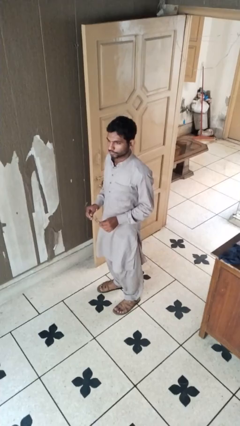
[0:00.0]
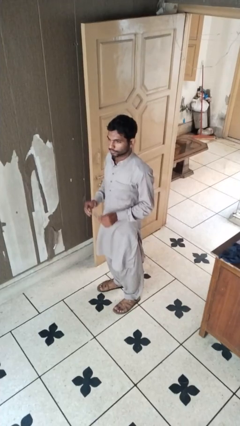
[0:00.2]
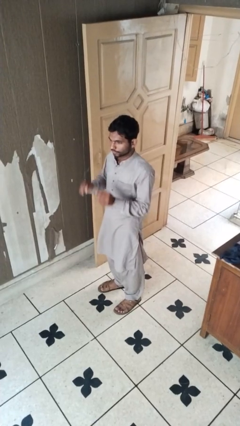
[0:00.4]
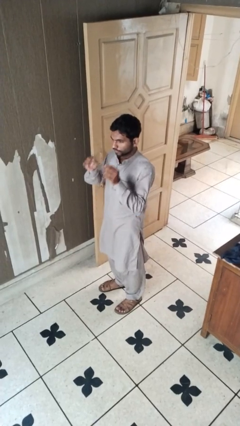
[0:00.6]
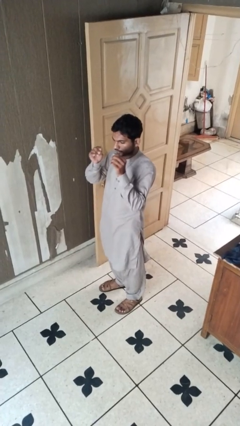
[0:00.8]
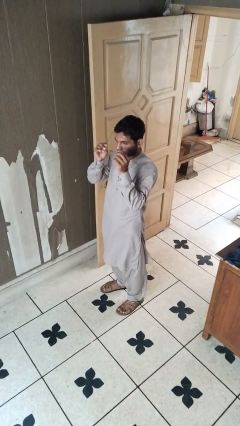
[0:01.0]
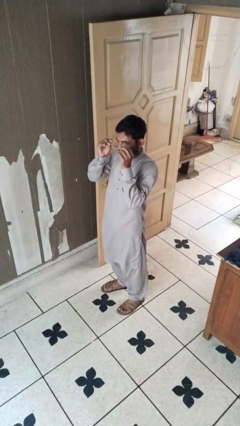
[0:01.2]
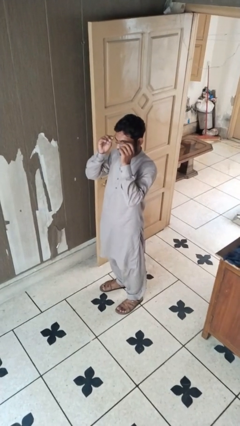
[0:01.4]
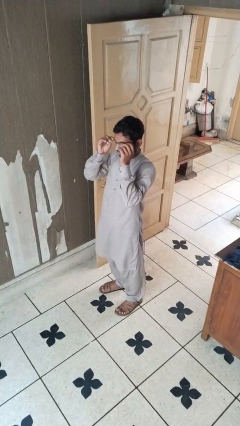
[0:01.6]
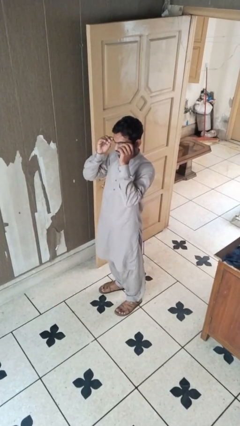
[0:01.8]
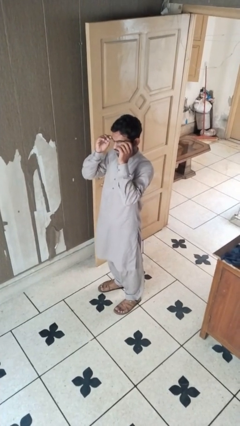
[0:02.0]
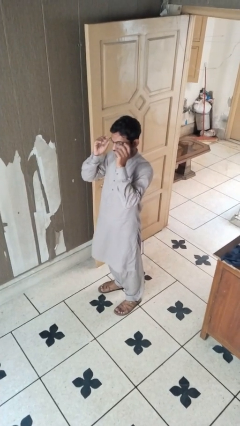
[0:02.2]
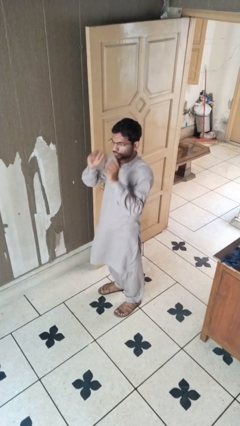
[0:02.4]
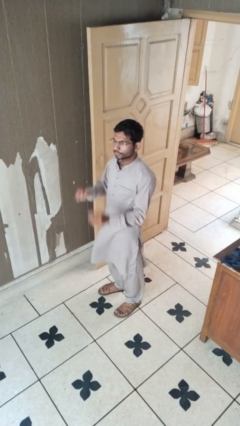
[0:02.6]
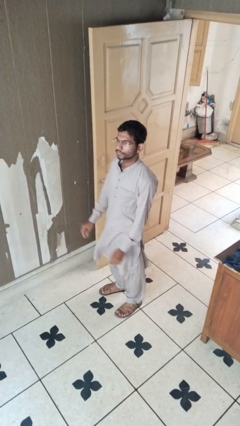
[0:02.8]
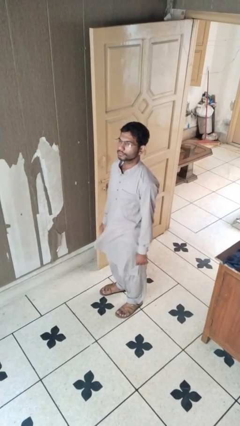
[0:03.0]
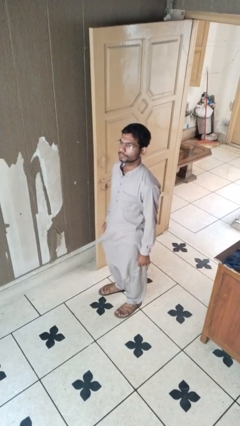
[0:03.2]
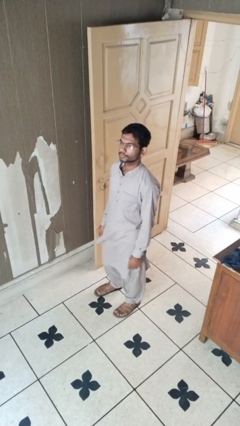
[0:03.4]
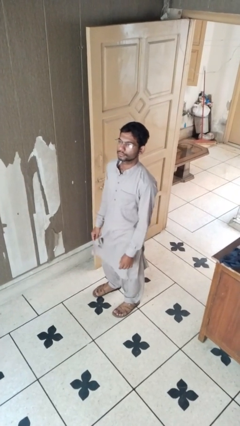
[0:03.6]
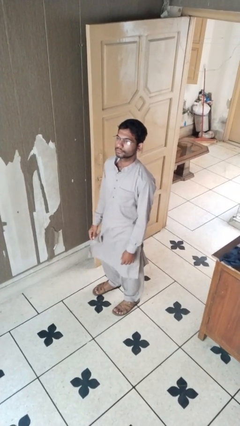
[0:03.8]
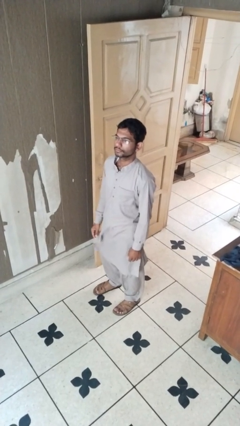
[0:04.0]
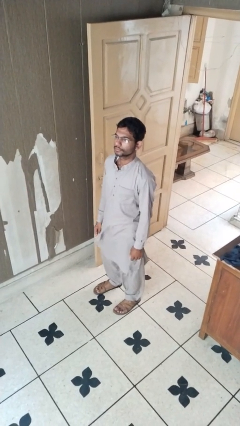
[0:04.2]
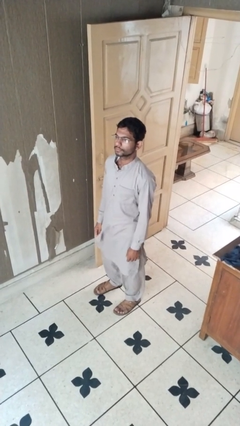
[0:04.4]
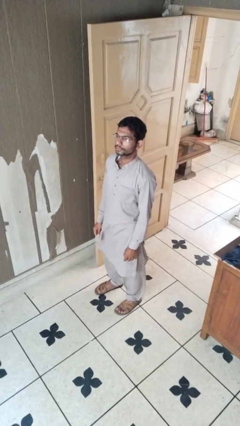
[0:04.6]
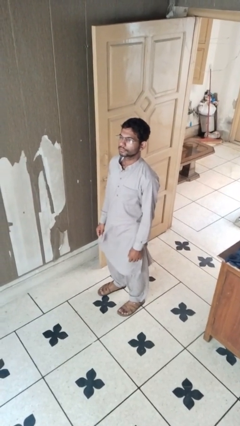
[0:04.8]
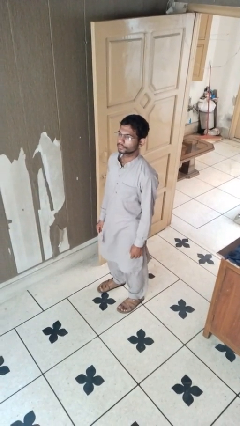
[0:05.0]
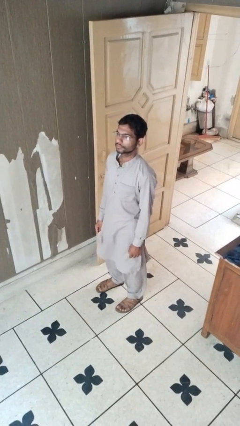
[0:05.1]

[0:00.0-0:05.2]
person puts on glasses

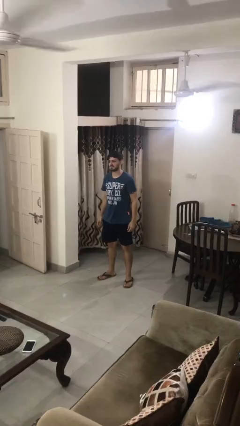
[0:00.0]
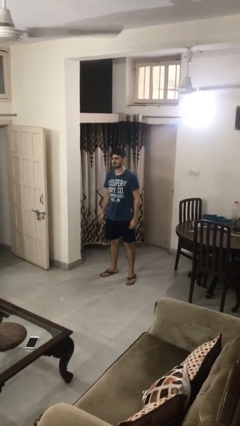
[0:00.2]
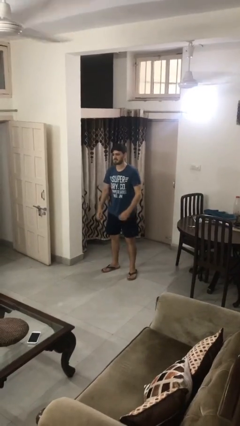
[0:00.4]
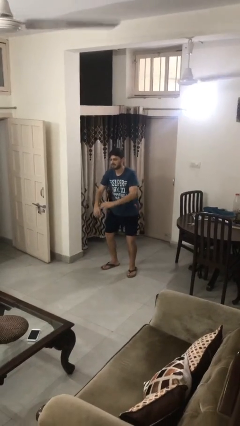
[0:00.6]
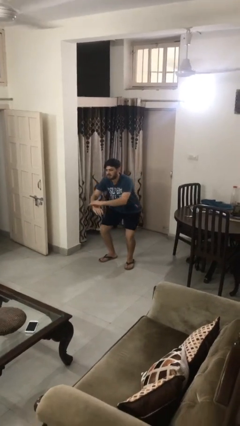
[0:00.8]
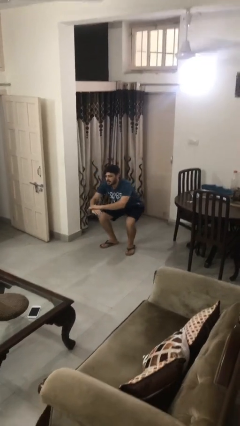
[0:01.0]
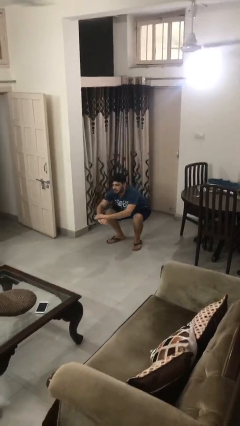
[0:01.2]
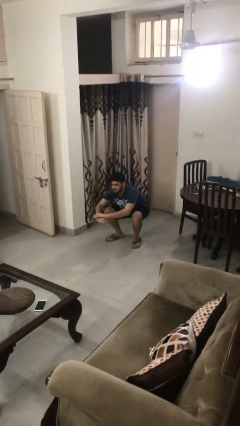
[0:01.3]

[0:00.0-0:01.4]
person squats

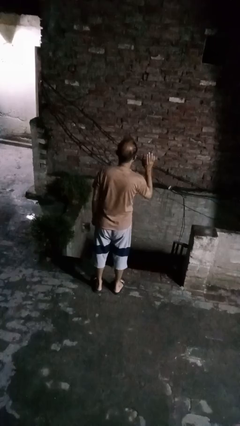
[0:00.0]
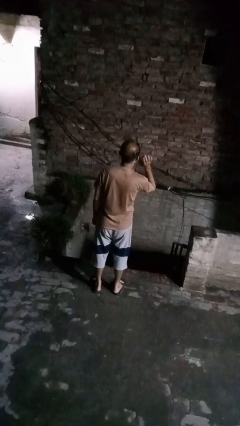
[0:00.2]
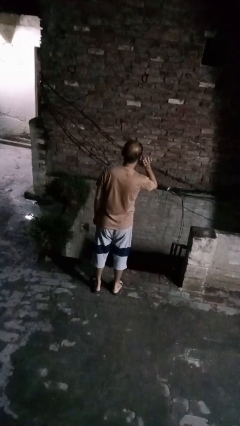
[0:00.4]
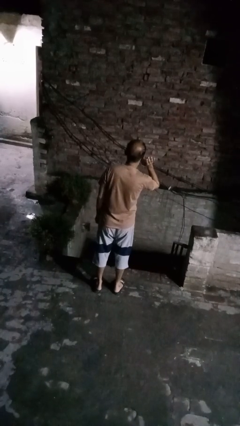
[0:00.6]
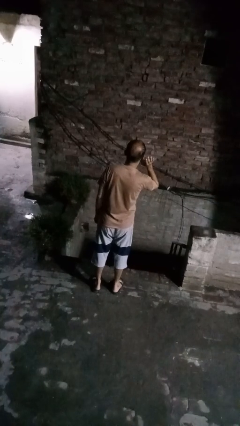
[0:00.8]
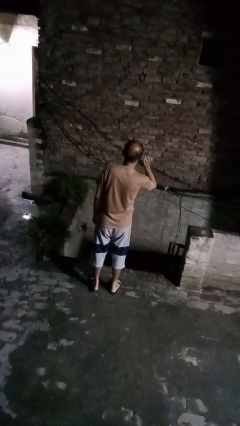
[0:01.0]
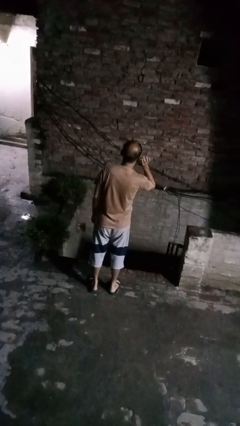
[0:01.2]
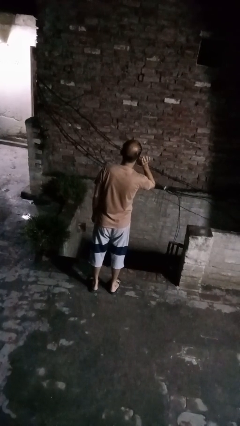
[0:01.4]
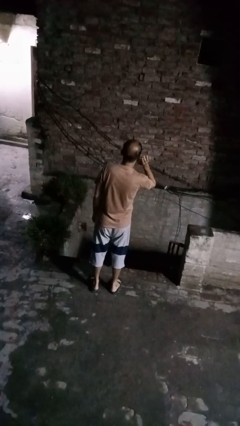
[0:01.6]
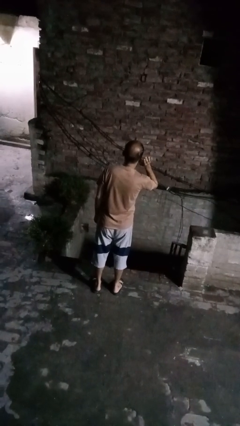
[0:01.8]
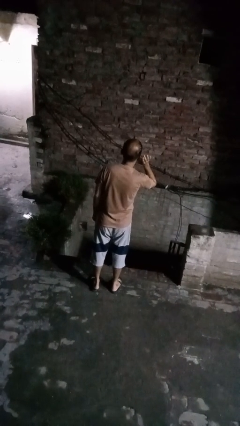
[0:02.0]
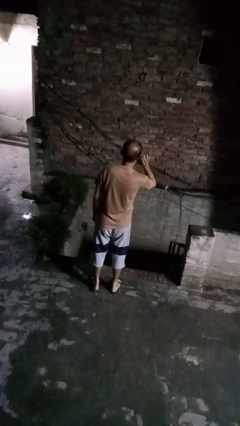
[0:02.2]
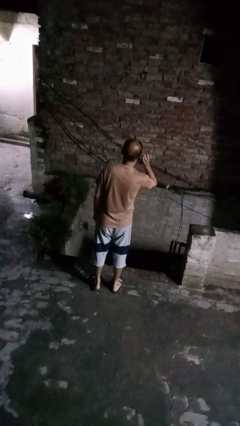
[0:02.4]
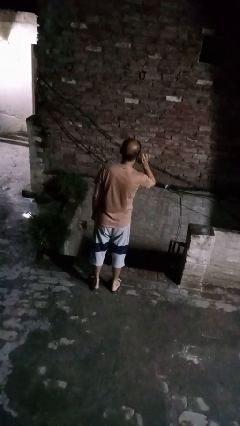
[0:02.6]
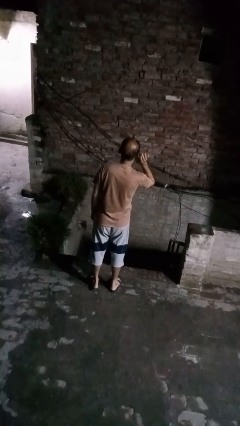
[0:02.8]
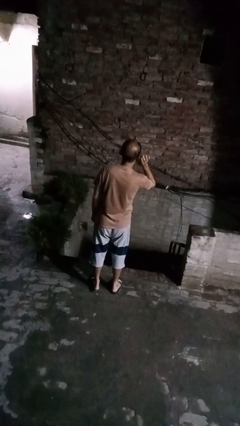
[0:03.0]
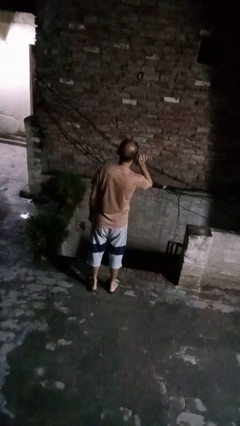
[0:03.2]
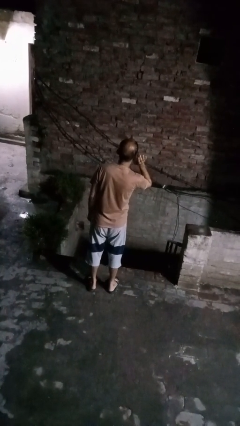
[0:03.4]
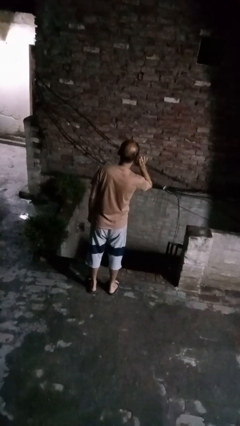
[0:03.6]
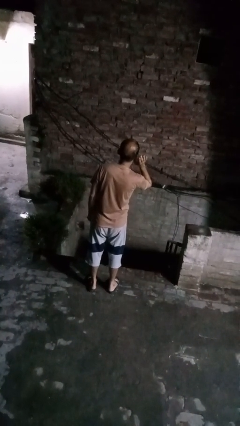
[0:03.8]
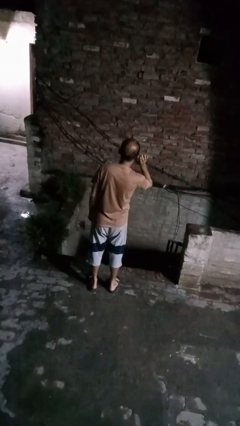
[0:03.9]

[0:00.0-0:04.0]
person gestures listen closely

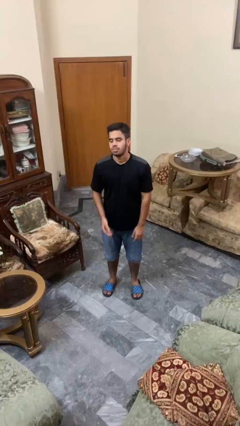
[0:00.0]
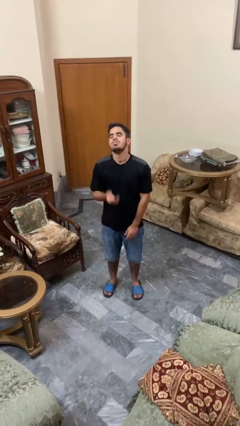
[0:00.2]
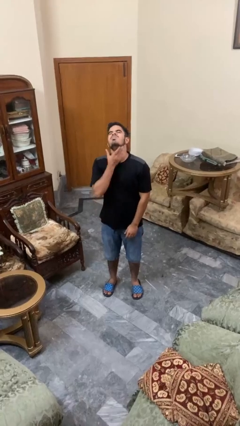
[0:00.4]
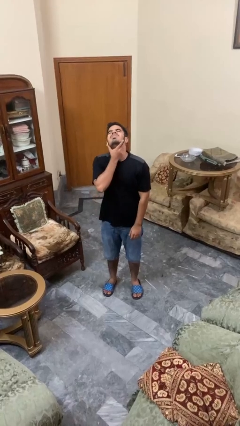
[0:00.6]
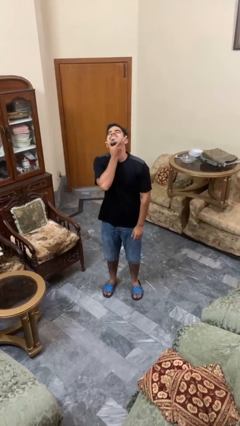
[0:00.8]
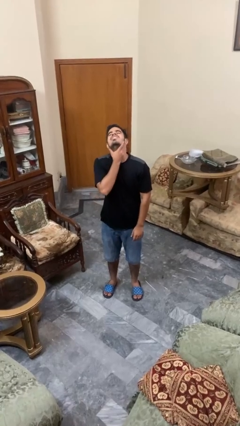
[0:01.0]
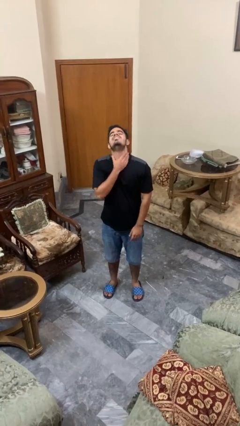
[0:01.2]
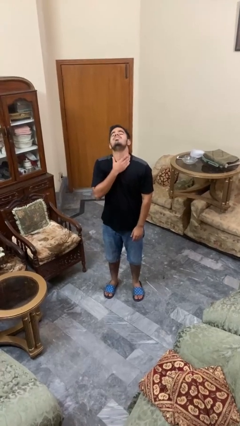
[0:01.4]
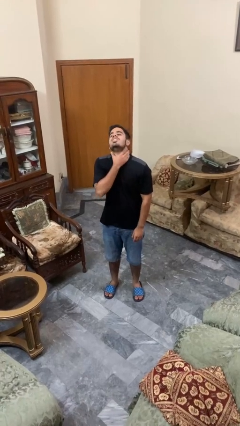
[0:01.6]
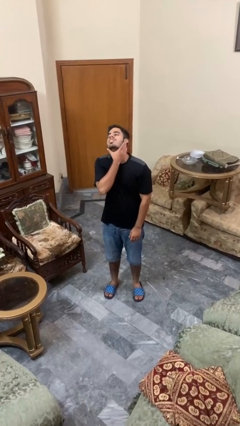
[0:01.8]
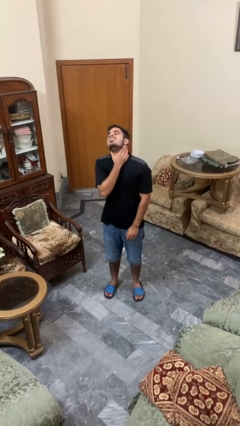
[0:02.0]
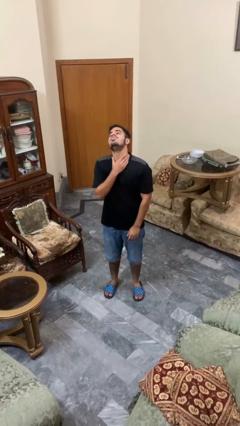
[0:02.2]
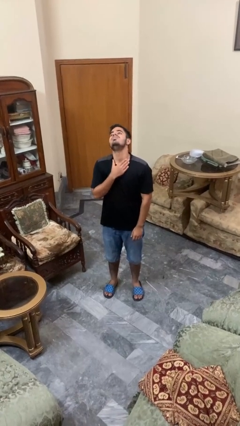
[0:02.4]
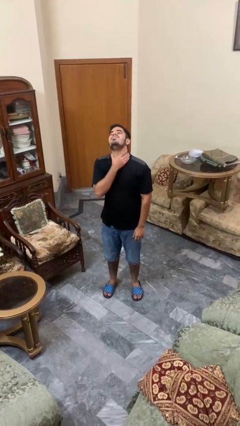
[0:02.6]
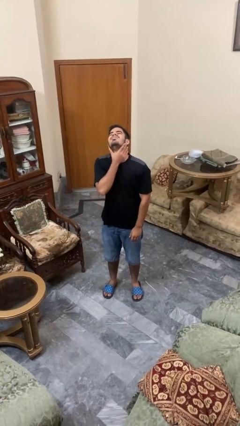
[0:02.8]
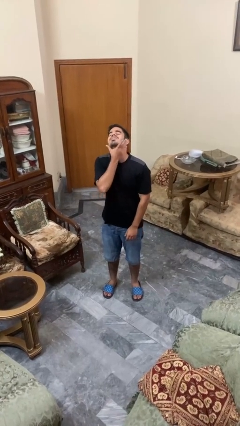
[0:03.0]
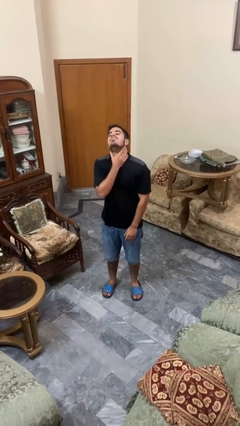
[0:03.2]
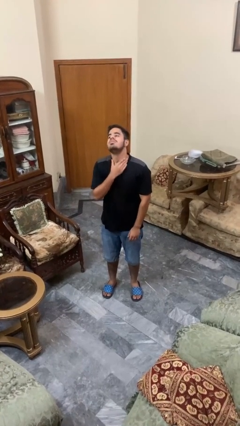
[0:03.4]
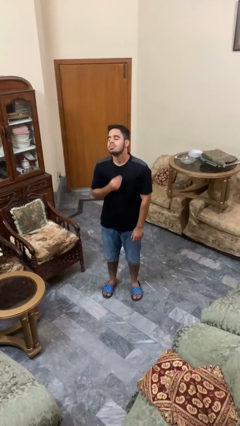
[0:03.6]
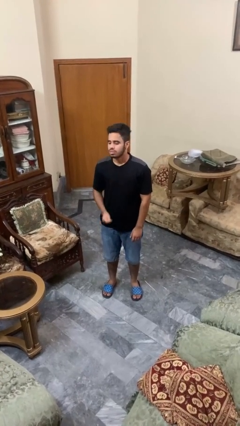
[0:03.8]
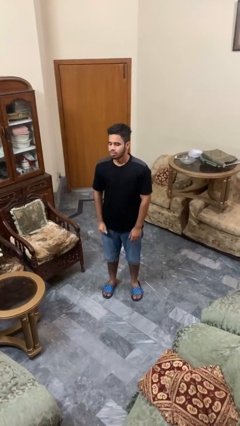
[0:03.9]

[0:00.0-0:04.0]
person rubs neck

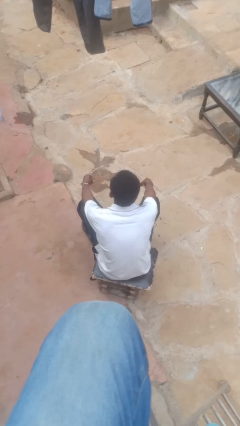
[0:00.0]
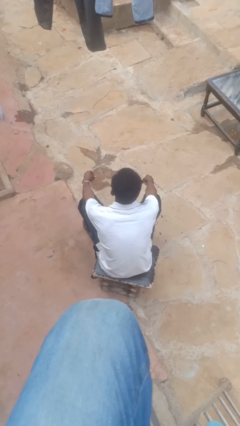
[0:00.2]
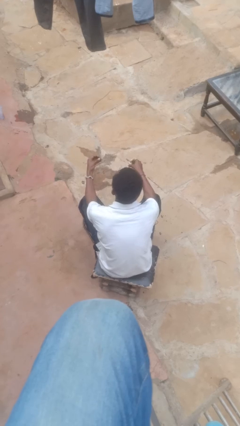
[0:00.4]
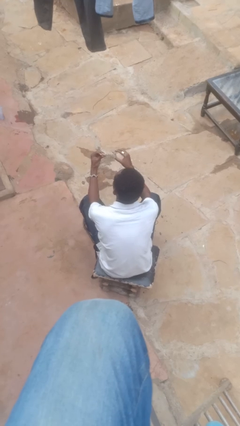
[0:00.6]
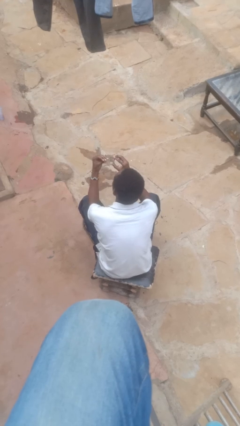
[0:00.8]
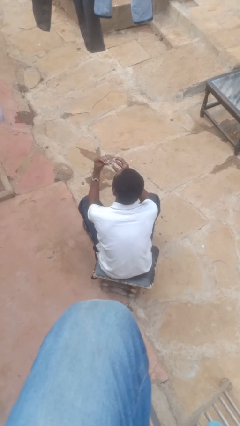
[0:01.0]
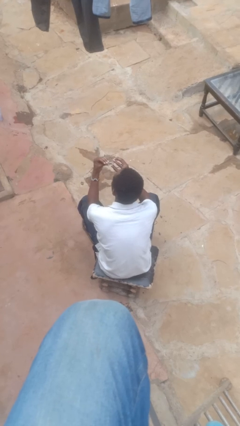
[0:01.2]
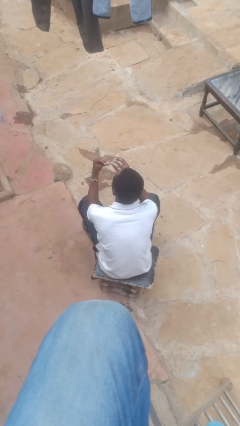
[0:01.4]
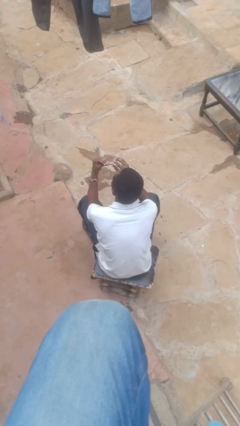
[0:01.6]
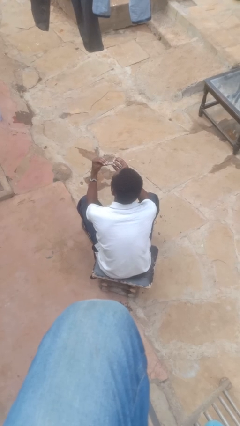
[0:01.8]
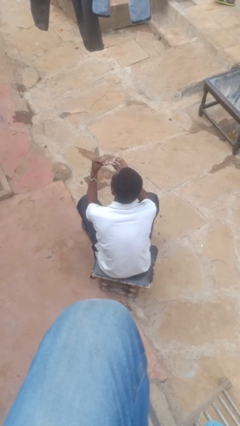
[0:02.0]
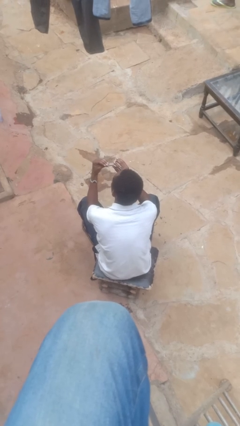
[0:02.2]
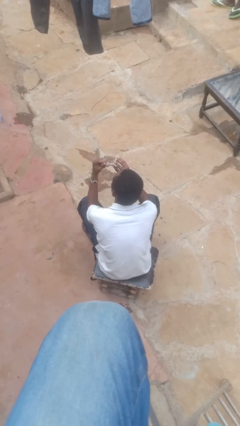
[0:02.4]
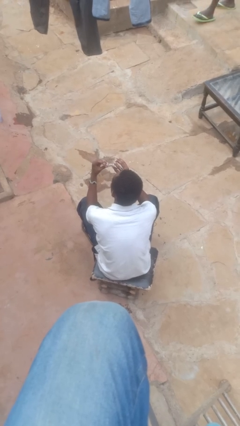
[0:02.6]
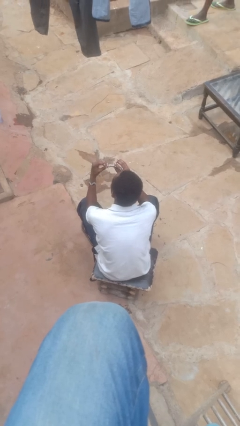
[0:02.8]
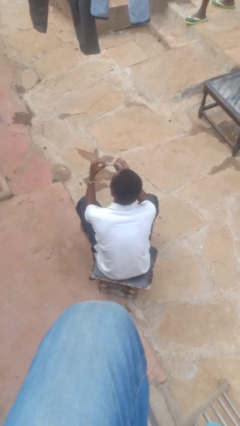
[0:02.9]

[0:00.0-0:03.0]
person clips fingernails
